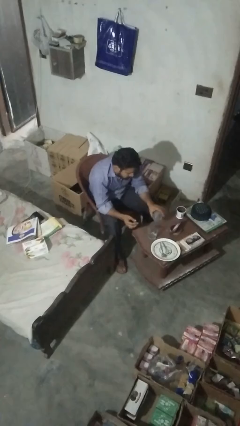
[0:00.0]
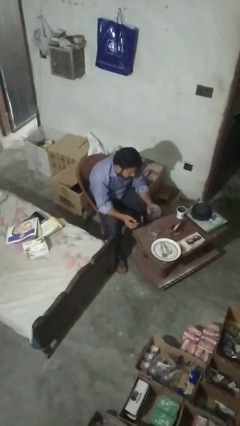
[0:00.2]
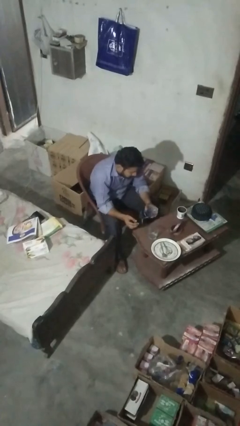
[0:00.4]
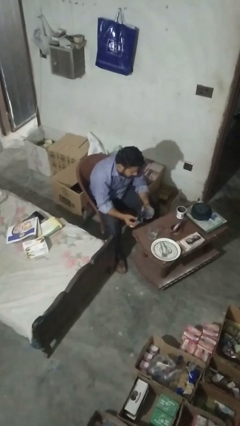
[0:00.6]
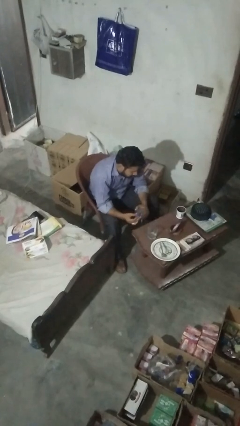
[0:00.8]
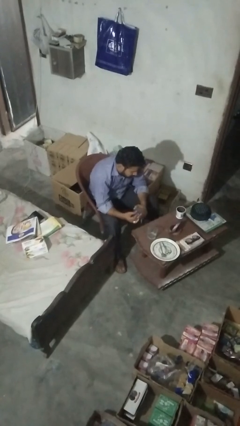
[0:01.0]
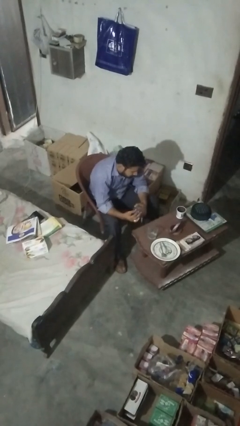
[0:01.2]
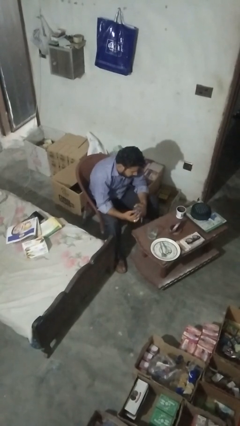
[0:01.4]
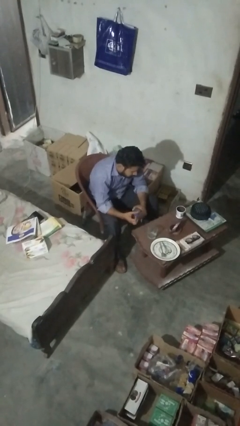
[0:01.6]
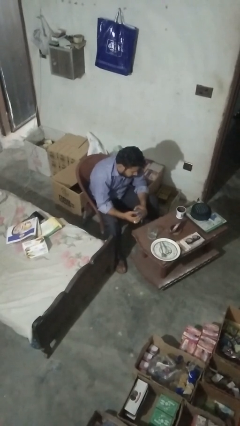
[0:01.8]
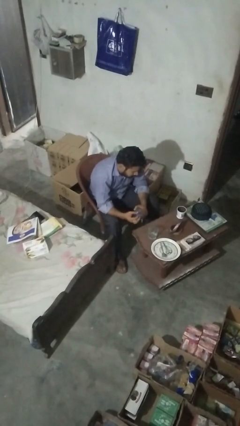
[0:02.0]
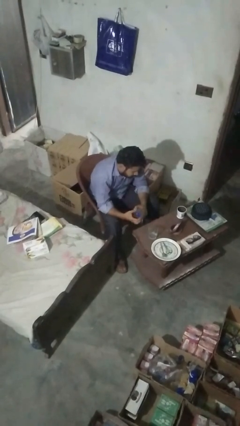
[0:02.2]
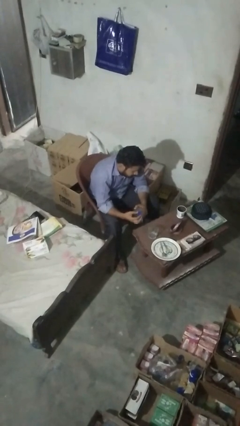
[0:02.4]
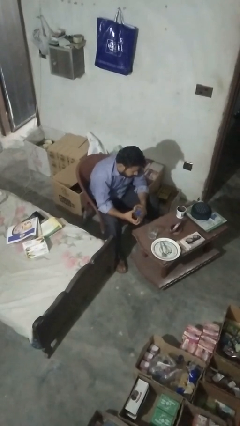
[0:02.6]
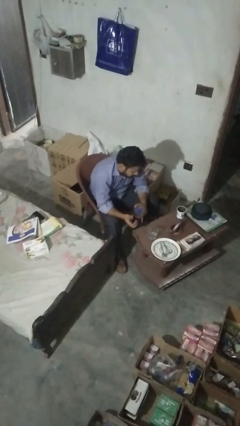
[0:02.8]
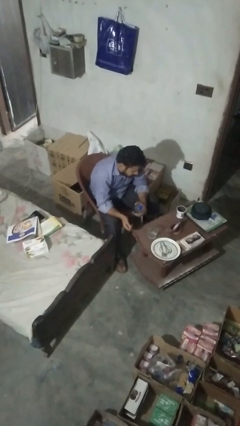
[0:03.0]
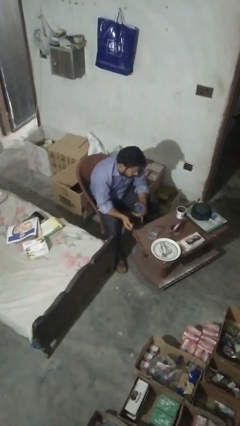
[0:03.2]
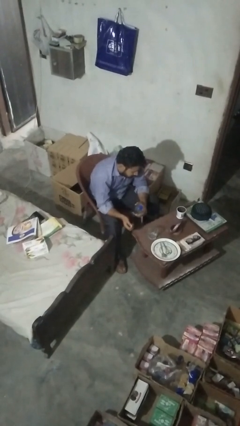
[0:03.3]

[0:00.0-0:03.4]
person screws lid to bottle

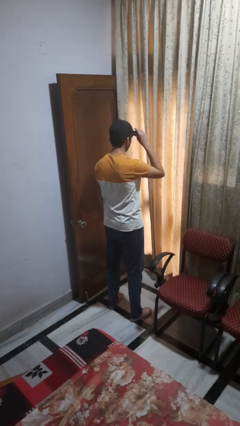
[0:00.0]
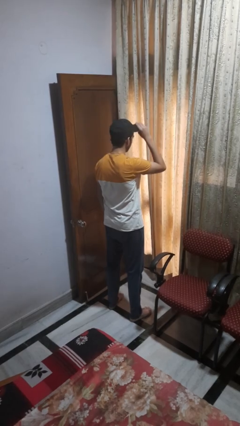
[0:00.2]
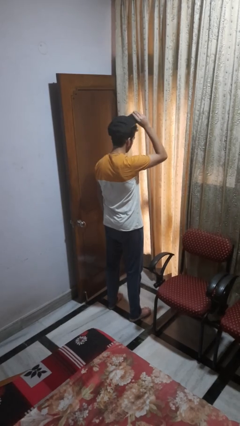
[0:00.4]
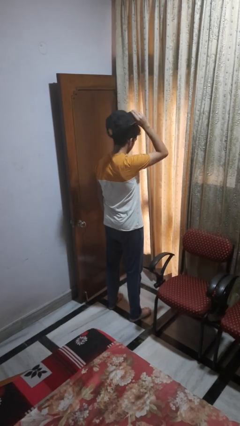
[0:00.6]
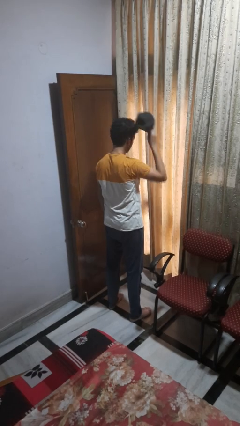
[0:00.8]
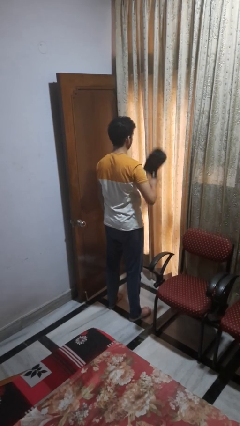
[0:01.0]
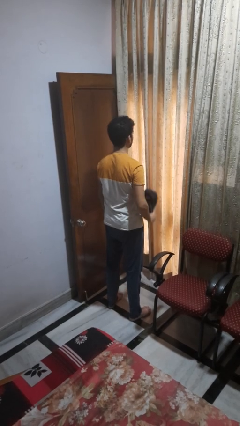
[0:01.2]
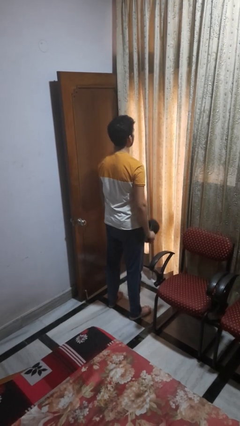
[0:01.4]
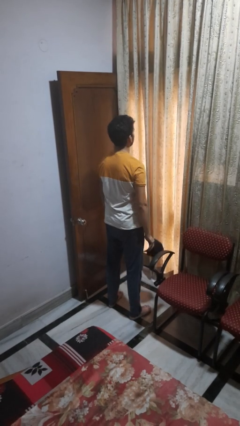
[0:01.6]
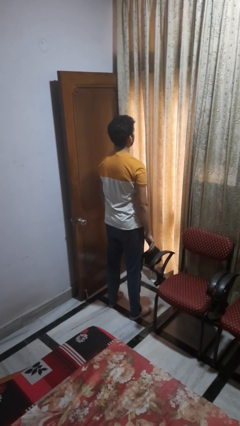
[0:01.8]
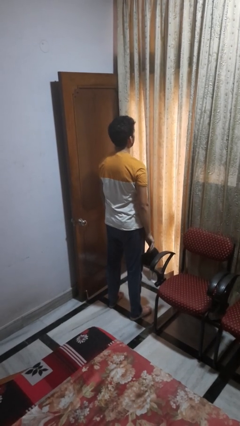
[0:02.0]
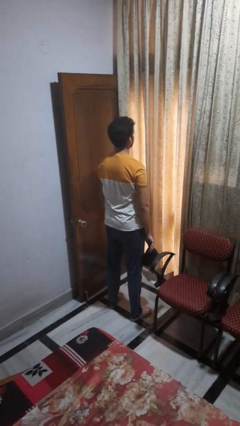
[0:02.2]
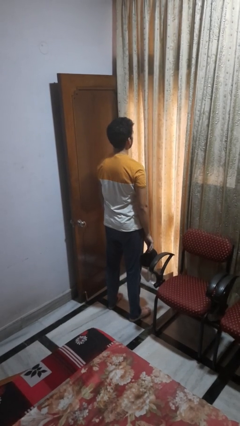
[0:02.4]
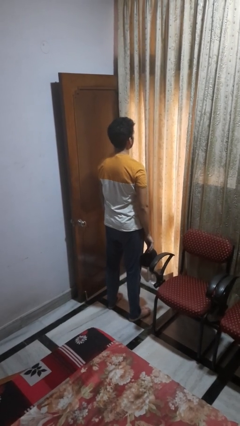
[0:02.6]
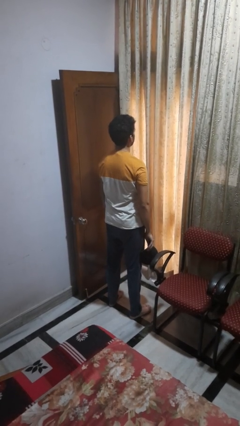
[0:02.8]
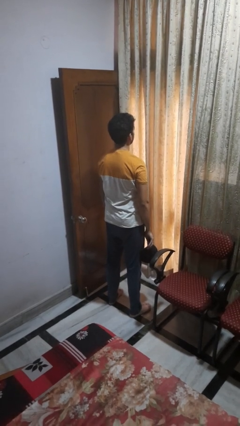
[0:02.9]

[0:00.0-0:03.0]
person takes off hat

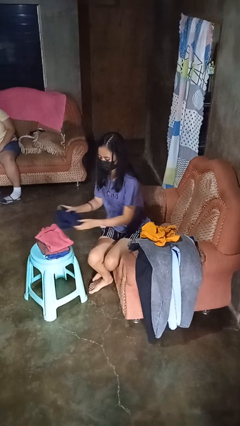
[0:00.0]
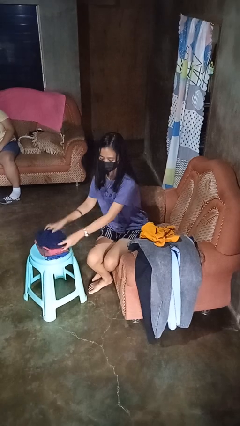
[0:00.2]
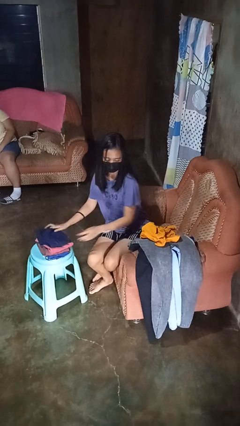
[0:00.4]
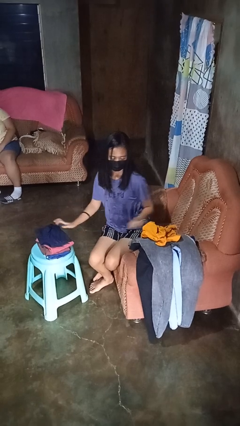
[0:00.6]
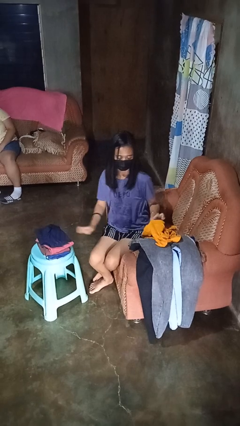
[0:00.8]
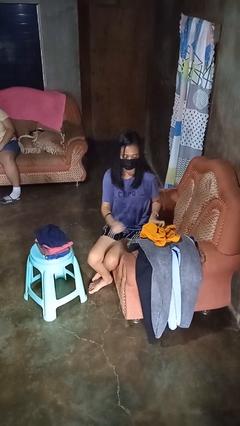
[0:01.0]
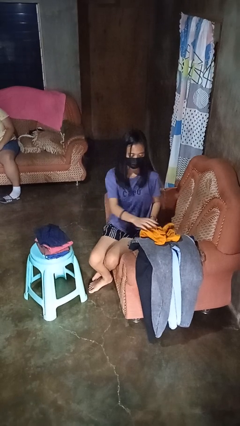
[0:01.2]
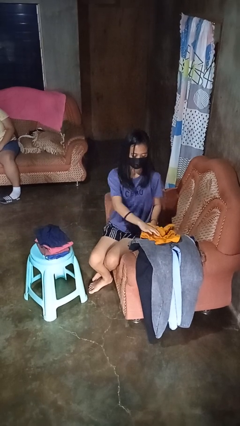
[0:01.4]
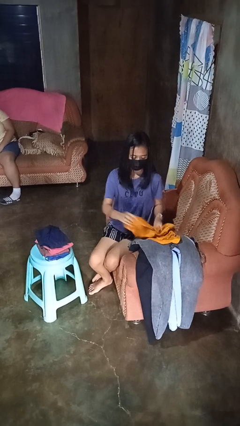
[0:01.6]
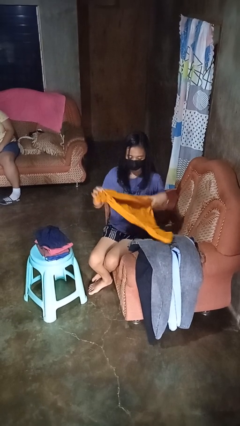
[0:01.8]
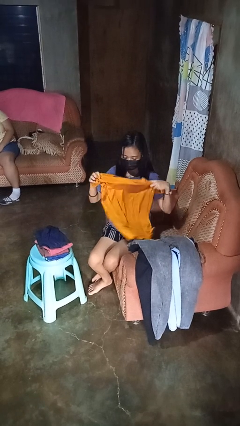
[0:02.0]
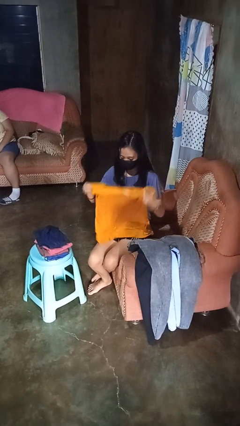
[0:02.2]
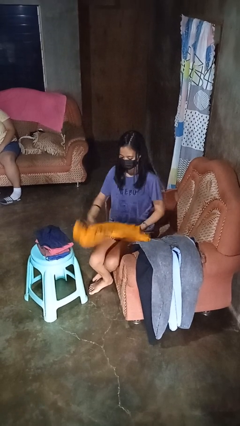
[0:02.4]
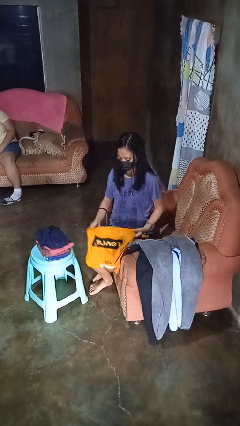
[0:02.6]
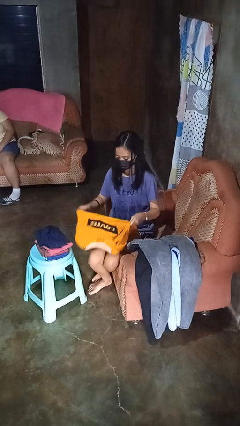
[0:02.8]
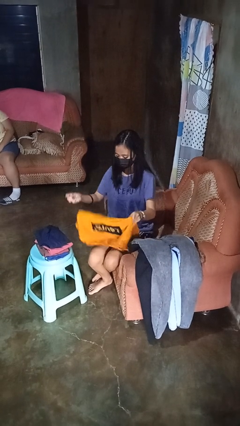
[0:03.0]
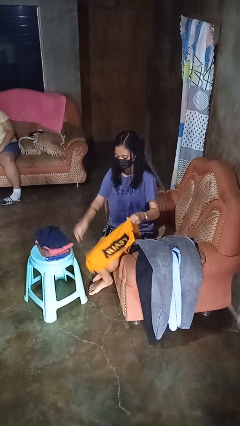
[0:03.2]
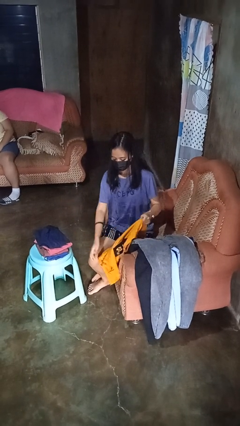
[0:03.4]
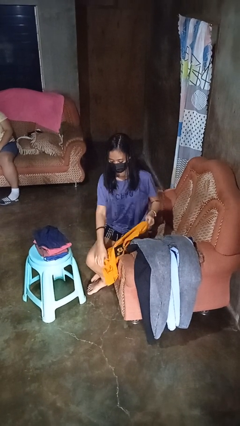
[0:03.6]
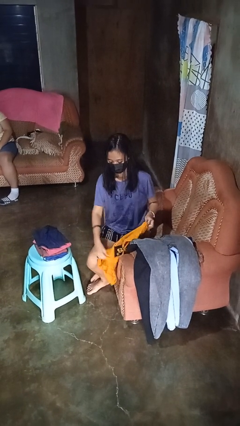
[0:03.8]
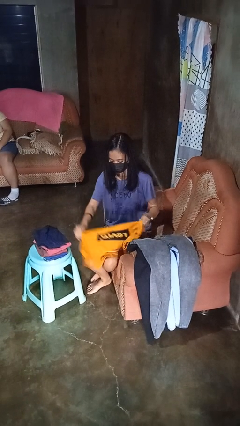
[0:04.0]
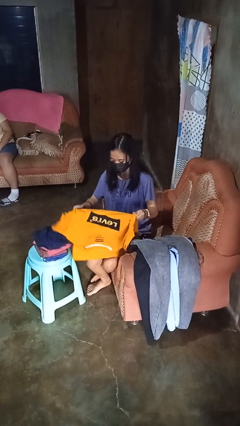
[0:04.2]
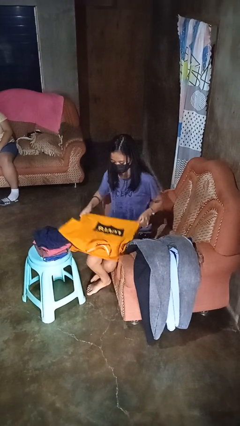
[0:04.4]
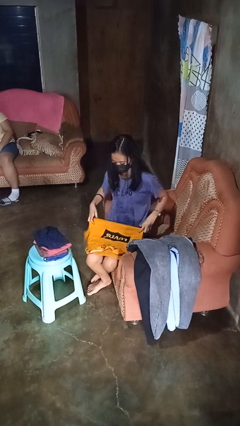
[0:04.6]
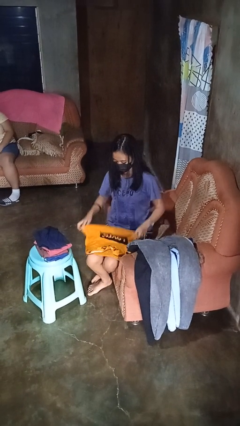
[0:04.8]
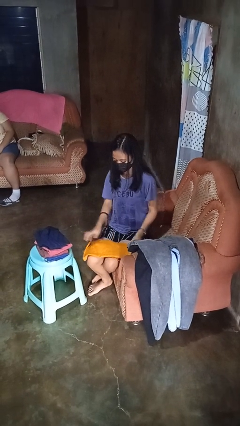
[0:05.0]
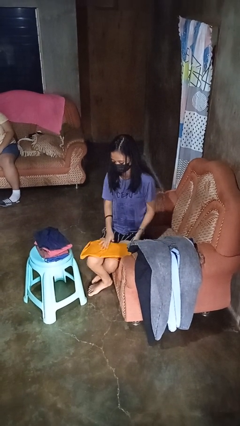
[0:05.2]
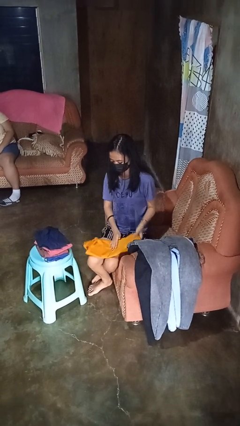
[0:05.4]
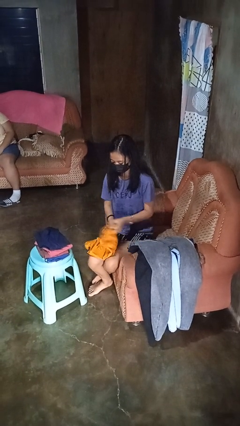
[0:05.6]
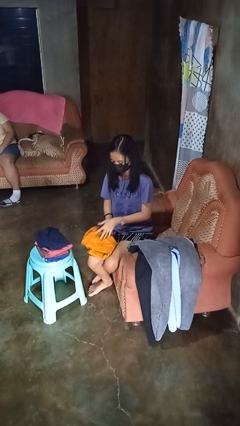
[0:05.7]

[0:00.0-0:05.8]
person folds shirt

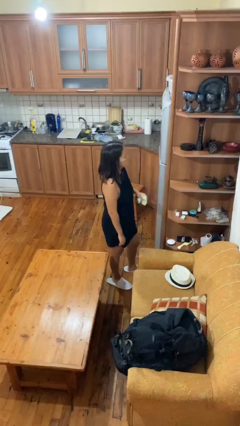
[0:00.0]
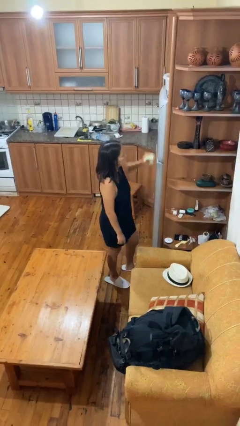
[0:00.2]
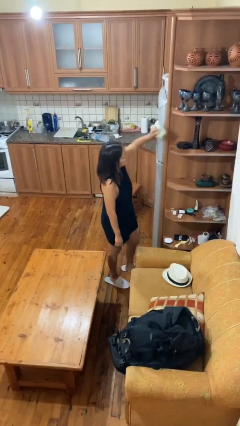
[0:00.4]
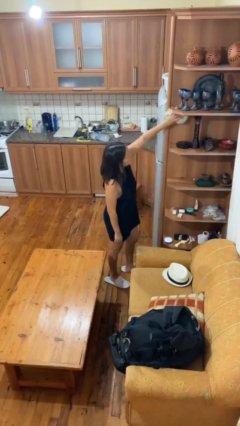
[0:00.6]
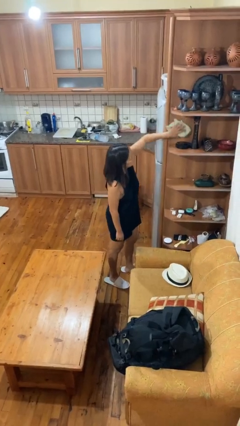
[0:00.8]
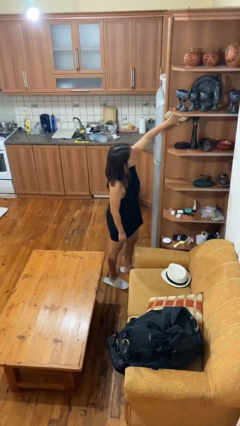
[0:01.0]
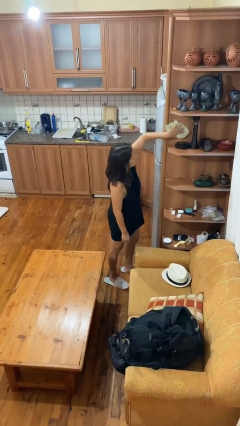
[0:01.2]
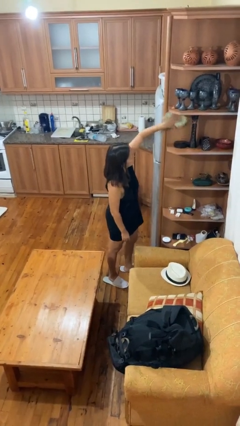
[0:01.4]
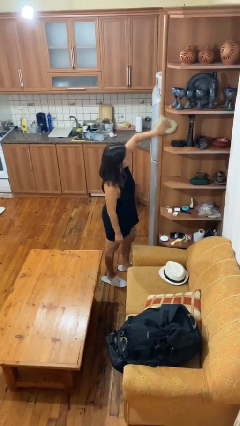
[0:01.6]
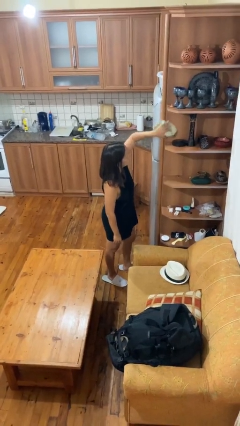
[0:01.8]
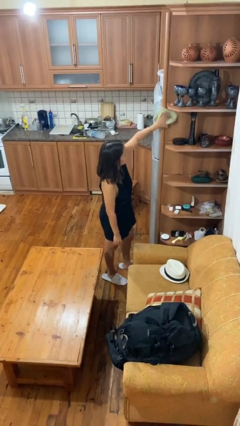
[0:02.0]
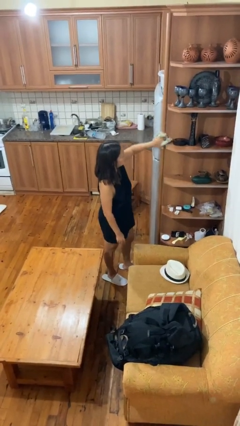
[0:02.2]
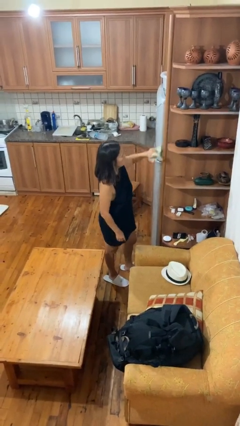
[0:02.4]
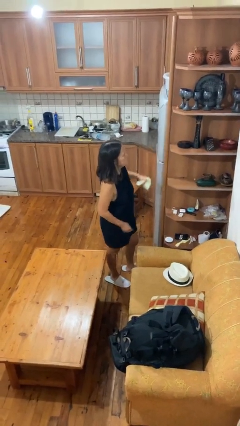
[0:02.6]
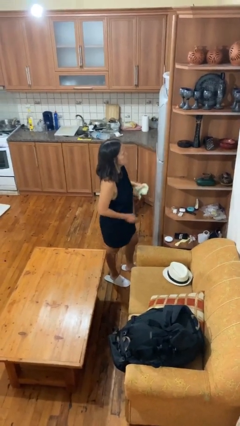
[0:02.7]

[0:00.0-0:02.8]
person dusts furniture

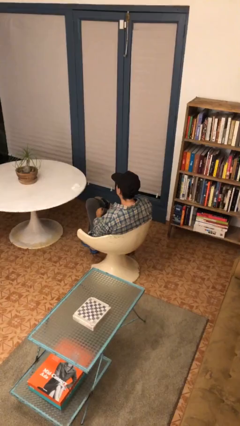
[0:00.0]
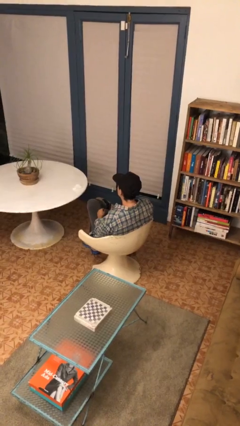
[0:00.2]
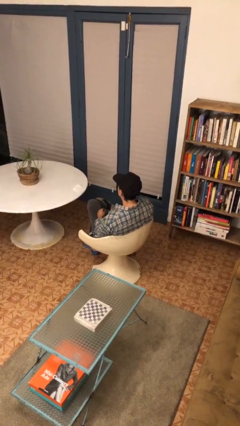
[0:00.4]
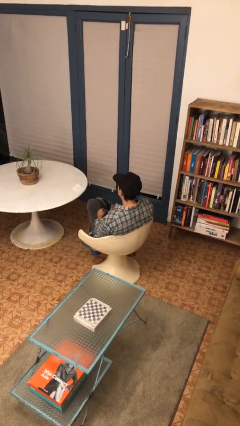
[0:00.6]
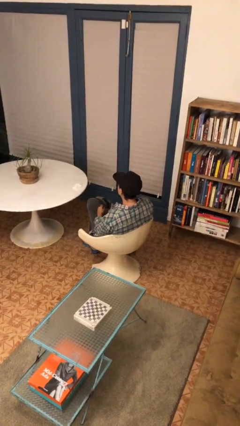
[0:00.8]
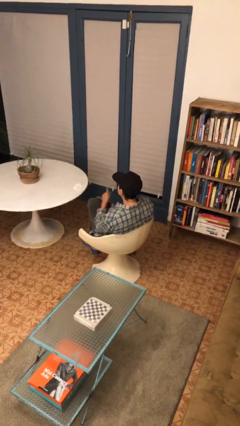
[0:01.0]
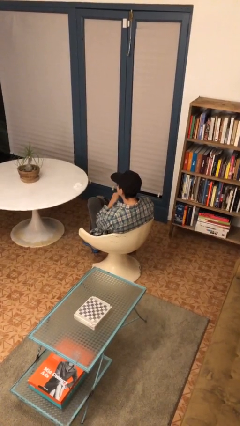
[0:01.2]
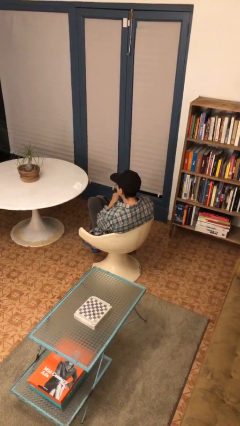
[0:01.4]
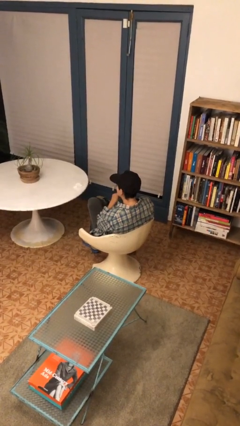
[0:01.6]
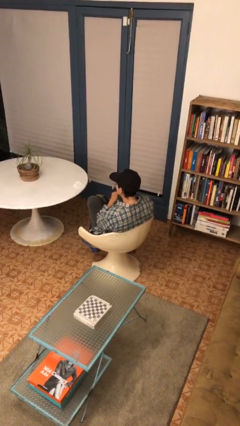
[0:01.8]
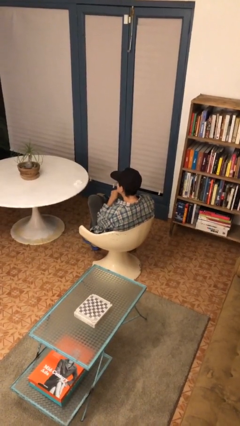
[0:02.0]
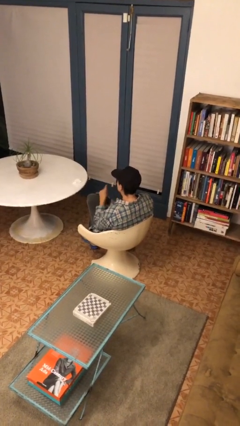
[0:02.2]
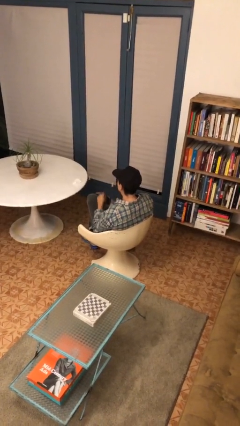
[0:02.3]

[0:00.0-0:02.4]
person gestures be quiet

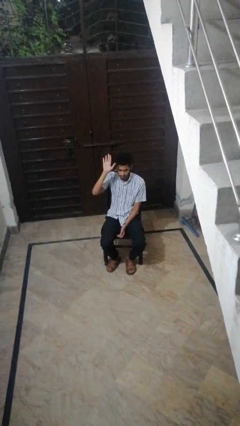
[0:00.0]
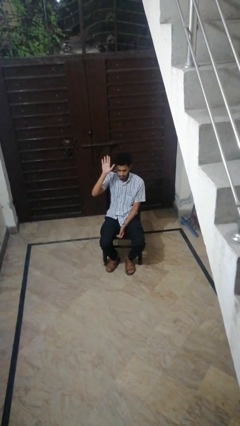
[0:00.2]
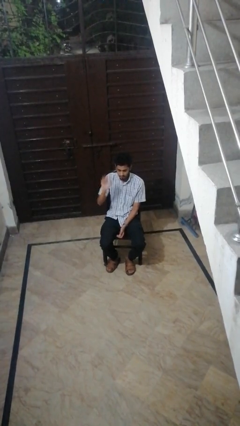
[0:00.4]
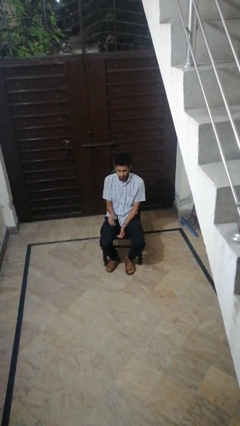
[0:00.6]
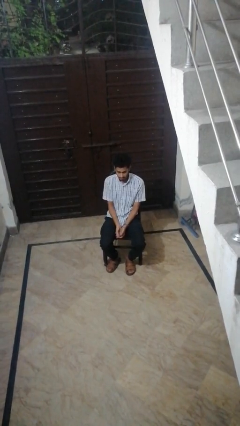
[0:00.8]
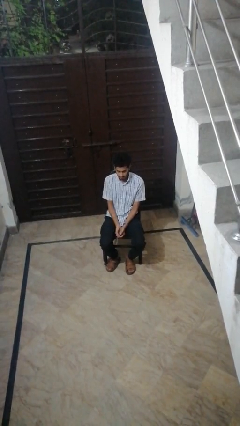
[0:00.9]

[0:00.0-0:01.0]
person gestures lower hand
